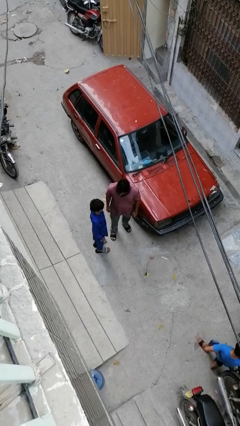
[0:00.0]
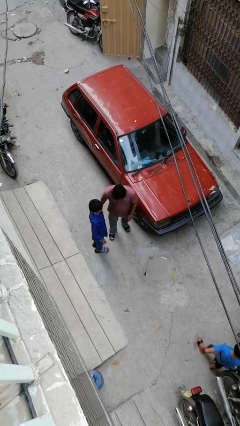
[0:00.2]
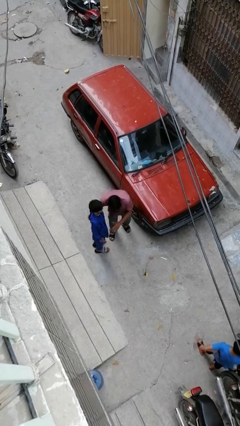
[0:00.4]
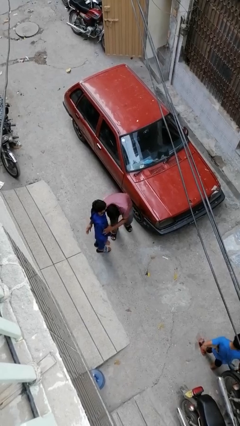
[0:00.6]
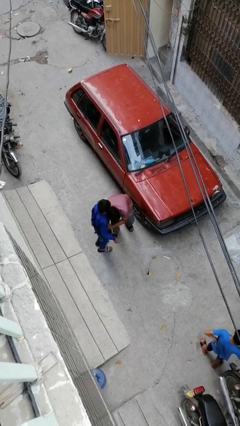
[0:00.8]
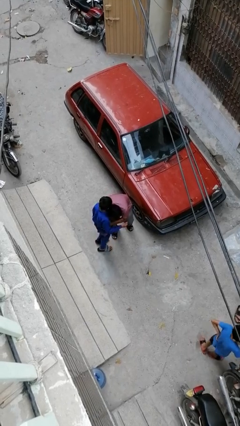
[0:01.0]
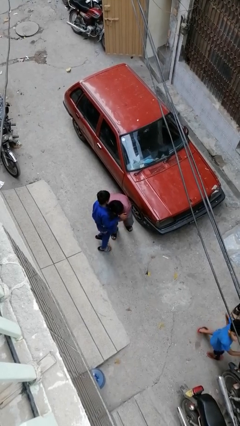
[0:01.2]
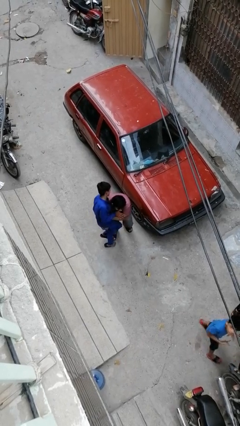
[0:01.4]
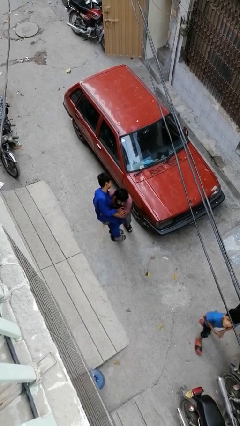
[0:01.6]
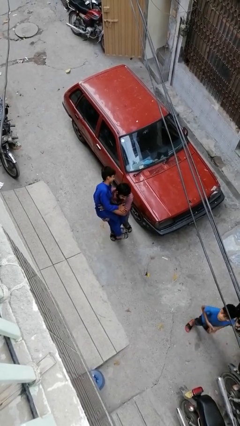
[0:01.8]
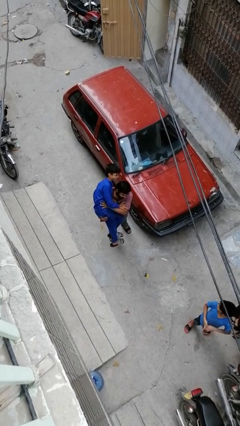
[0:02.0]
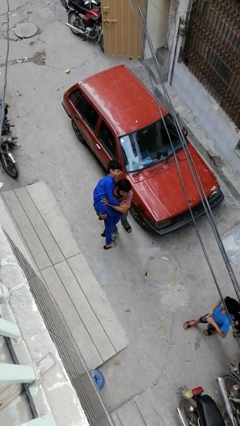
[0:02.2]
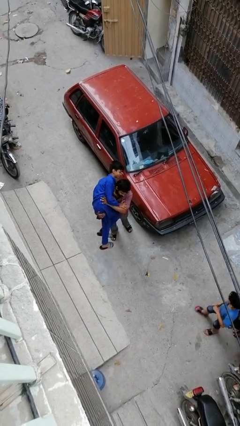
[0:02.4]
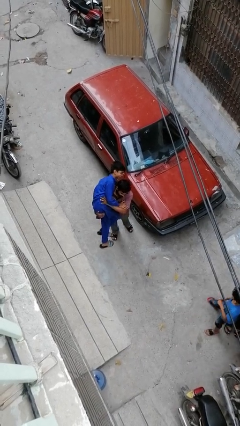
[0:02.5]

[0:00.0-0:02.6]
person picks up person

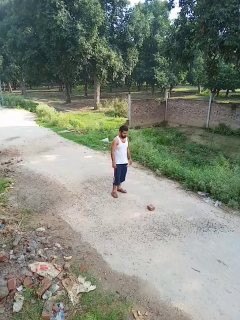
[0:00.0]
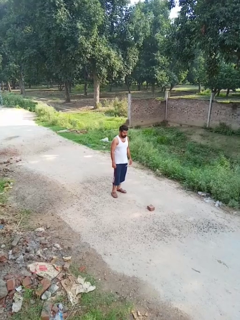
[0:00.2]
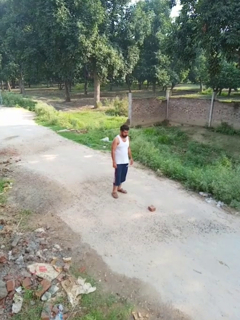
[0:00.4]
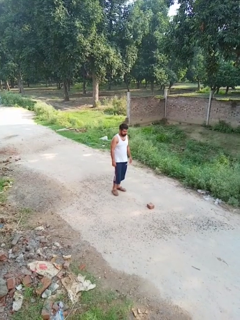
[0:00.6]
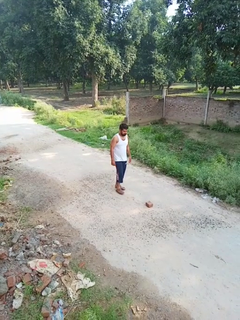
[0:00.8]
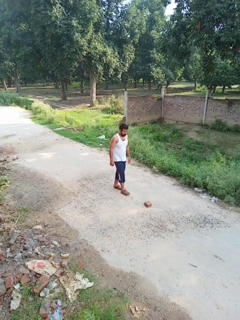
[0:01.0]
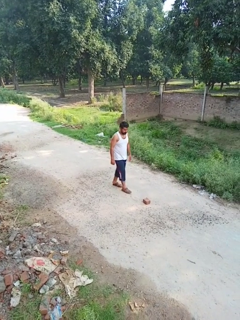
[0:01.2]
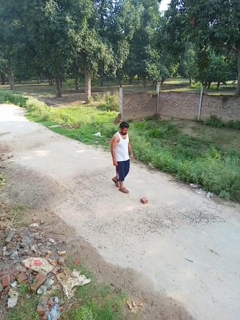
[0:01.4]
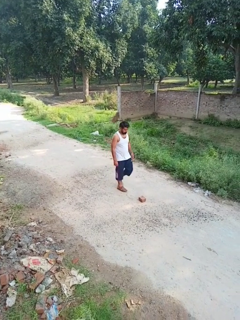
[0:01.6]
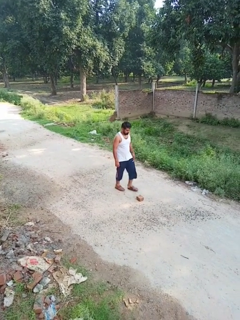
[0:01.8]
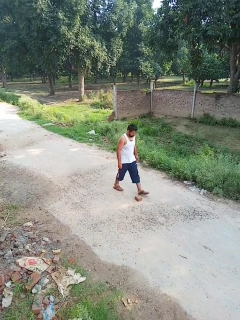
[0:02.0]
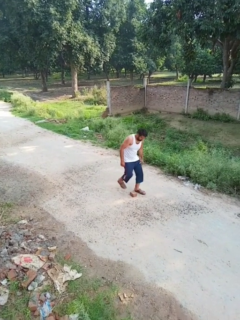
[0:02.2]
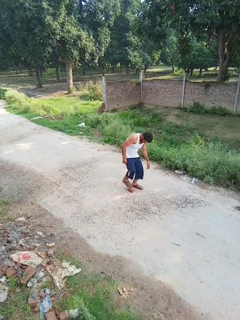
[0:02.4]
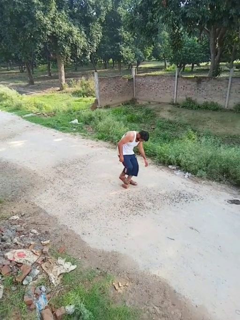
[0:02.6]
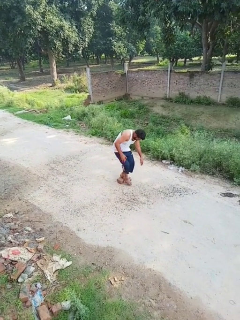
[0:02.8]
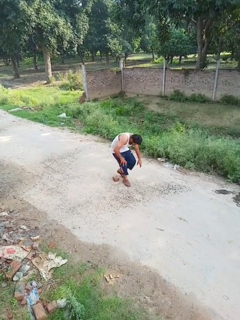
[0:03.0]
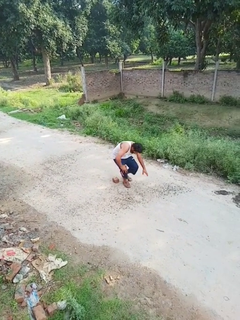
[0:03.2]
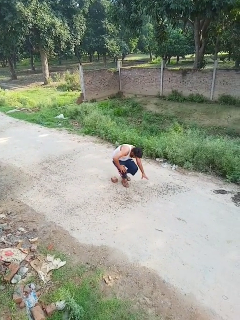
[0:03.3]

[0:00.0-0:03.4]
person trips on object on floor

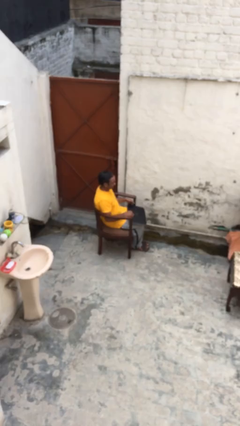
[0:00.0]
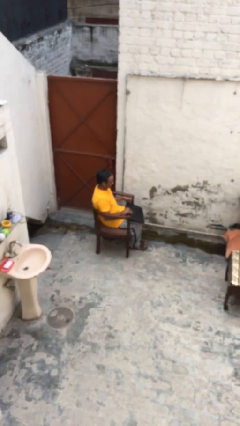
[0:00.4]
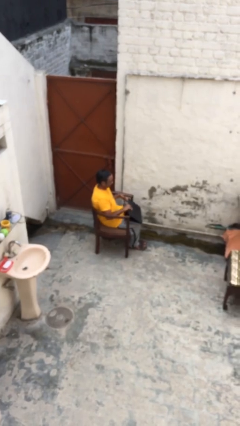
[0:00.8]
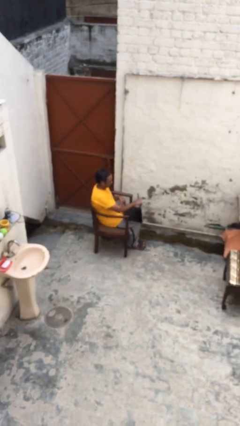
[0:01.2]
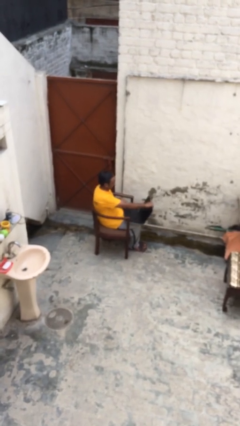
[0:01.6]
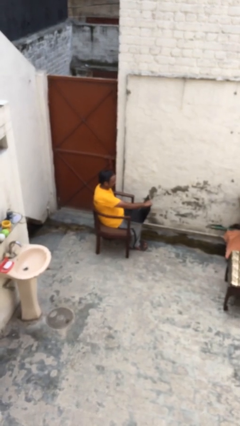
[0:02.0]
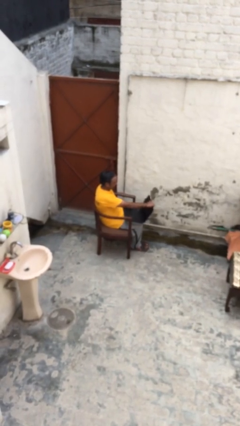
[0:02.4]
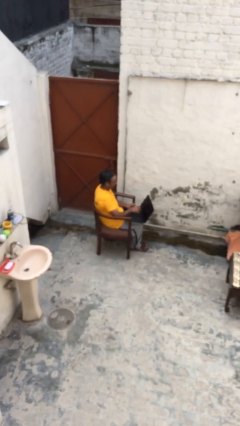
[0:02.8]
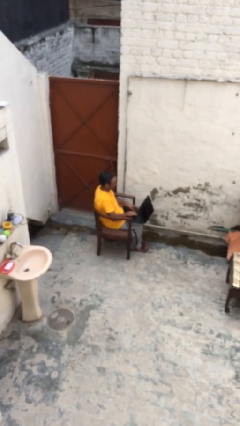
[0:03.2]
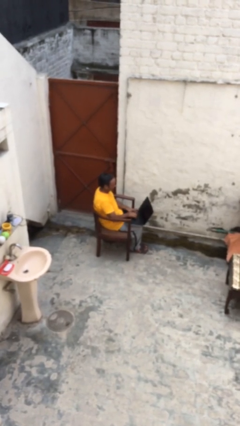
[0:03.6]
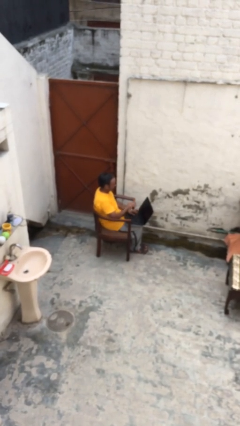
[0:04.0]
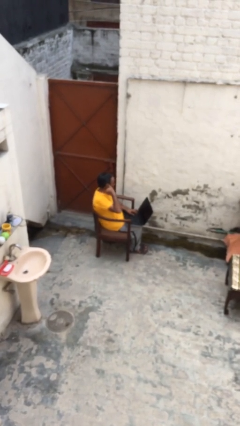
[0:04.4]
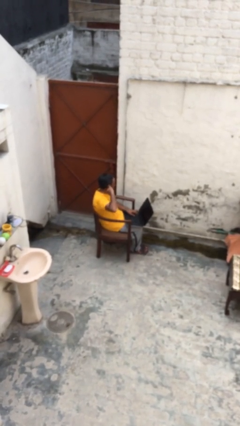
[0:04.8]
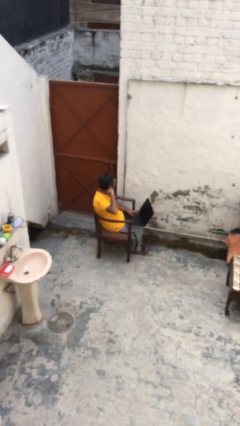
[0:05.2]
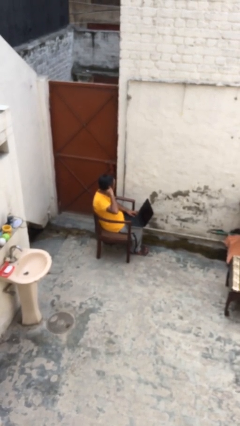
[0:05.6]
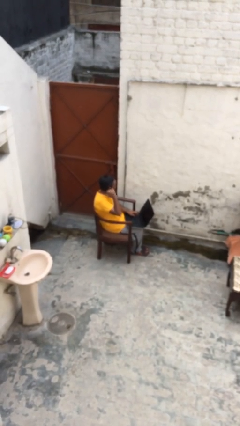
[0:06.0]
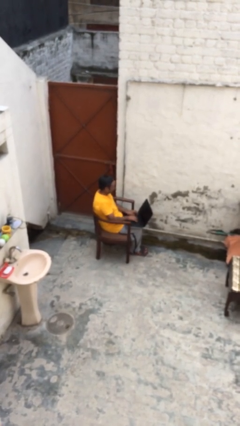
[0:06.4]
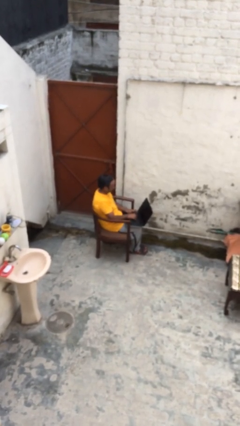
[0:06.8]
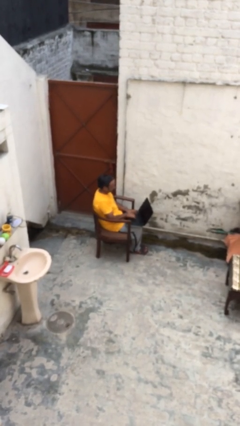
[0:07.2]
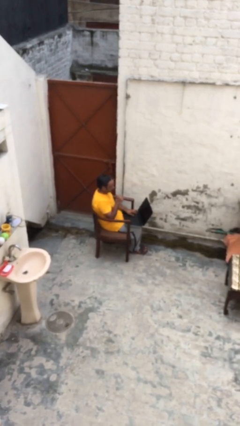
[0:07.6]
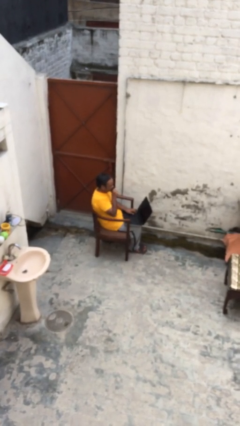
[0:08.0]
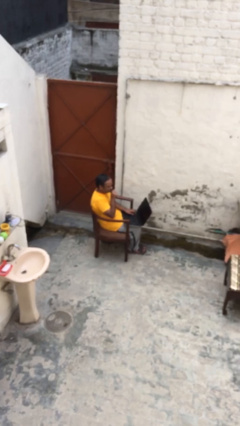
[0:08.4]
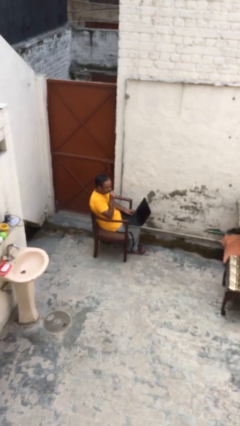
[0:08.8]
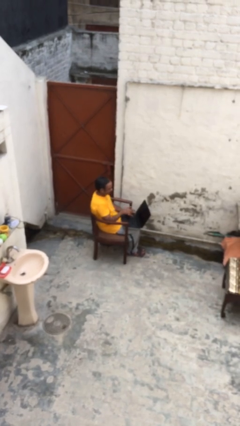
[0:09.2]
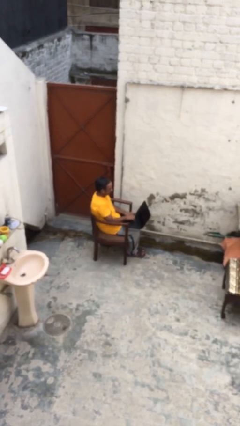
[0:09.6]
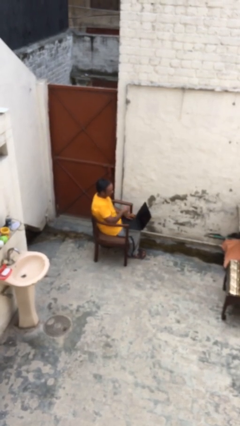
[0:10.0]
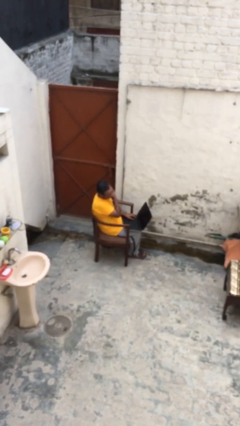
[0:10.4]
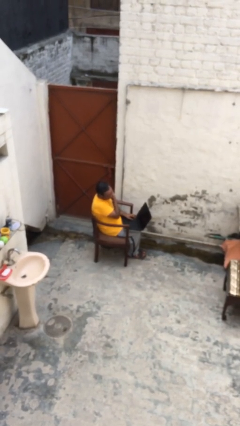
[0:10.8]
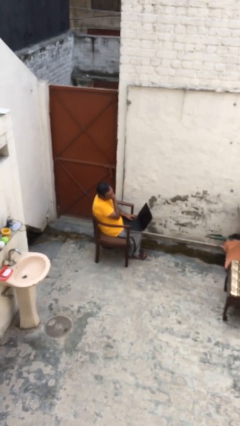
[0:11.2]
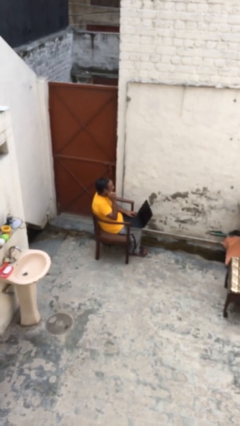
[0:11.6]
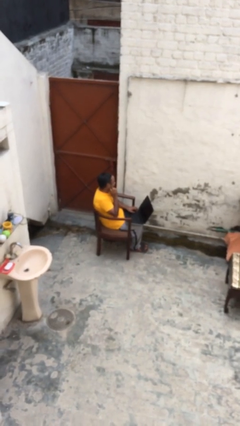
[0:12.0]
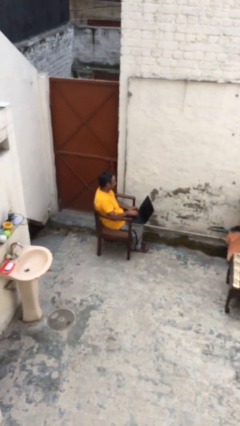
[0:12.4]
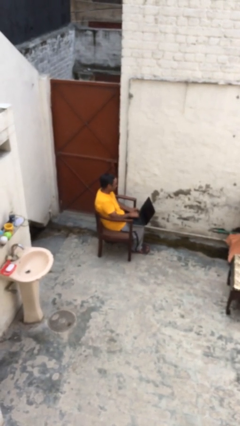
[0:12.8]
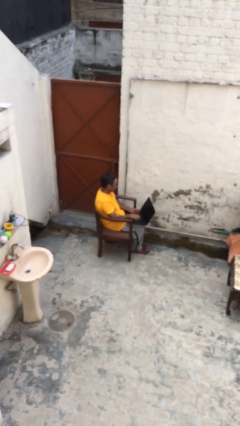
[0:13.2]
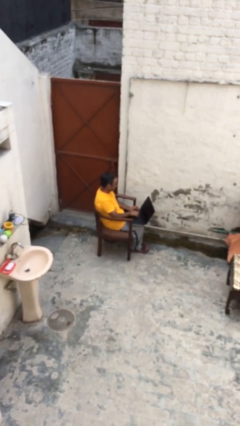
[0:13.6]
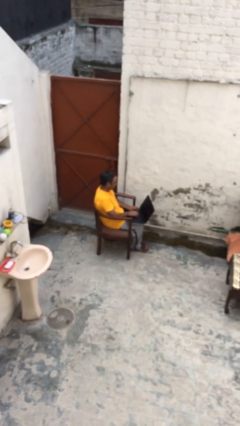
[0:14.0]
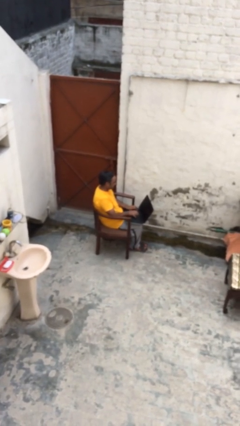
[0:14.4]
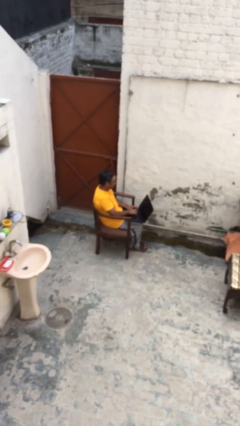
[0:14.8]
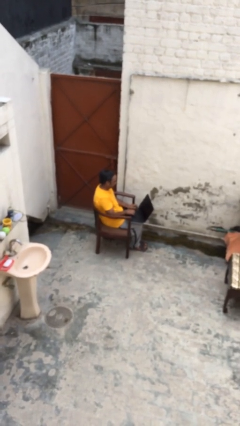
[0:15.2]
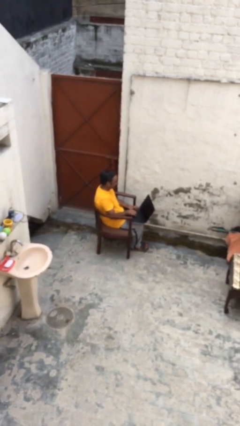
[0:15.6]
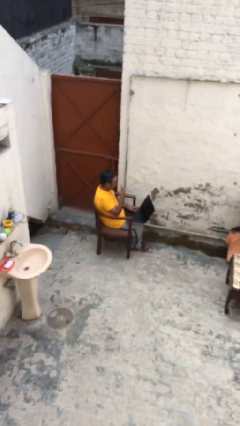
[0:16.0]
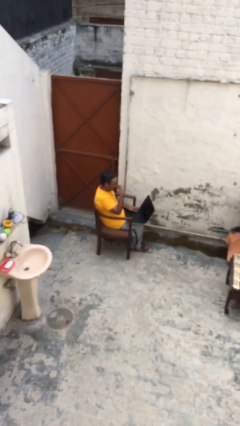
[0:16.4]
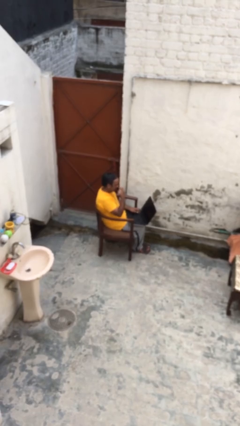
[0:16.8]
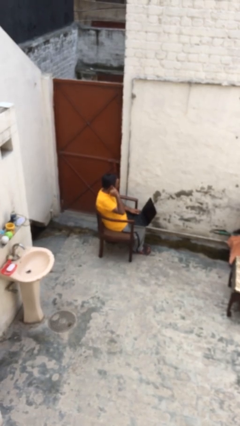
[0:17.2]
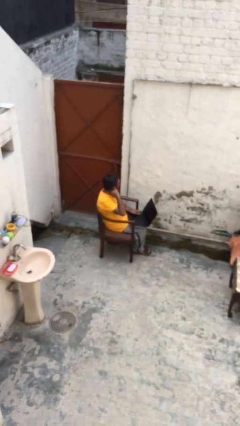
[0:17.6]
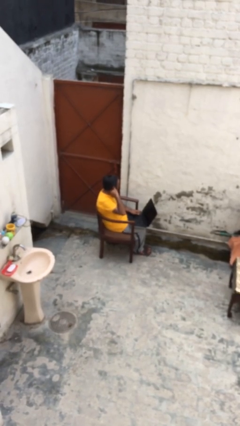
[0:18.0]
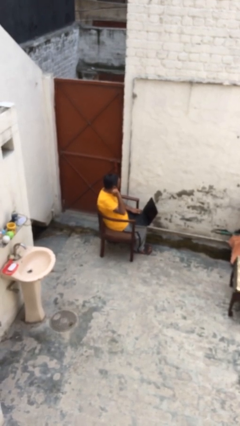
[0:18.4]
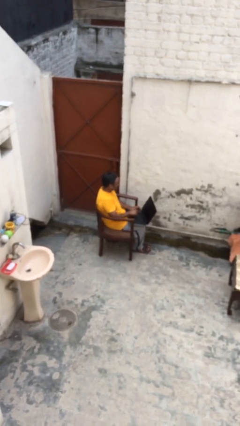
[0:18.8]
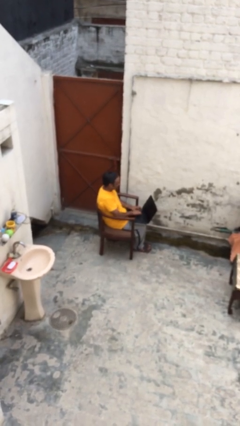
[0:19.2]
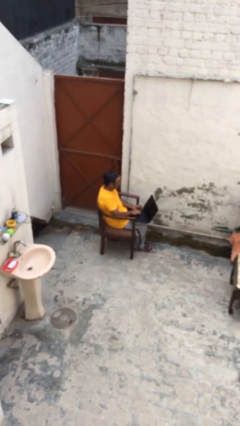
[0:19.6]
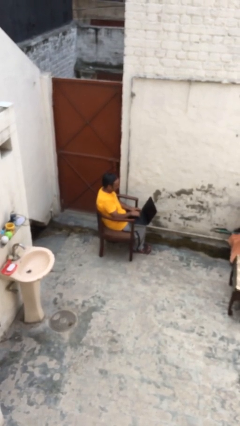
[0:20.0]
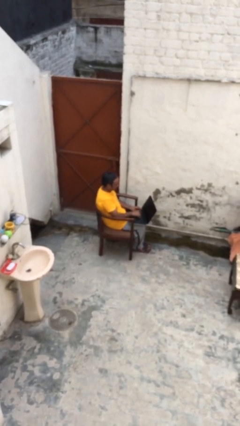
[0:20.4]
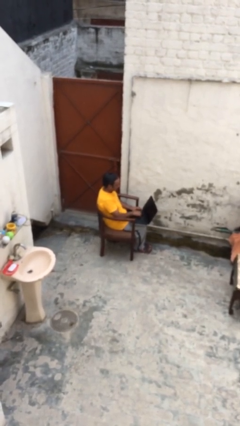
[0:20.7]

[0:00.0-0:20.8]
person interacts with laptop

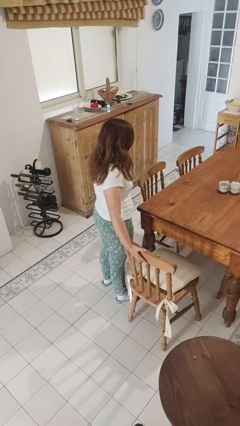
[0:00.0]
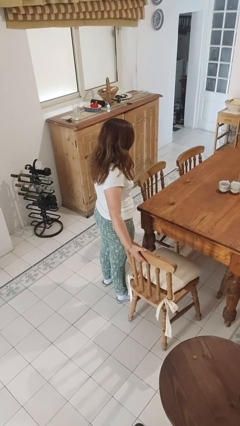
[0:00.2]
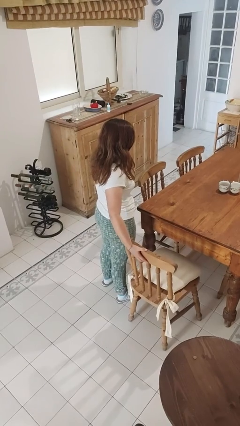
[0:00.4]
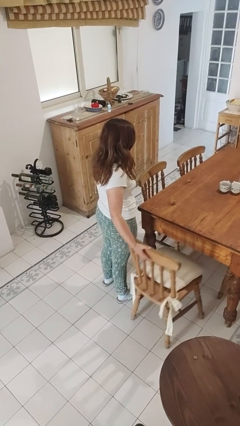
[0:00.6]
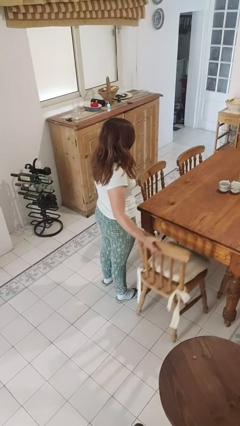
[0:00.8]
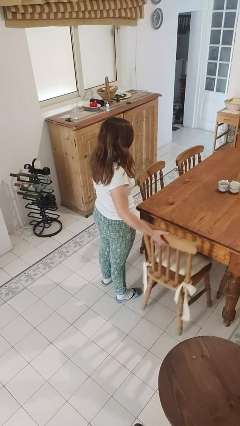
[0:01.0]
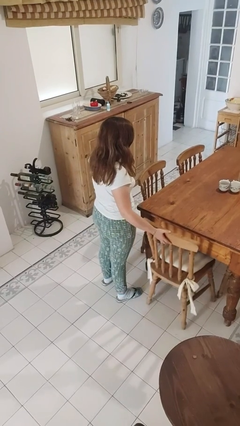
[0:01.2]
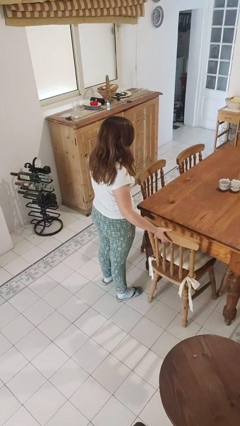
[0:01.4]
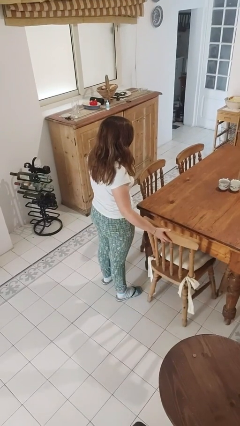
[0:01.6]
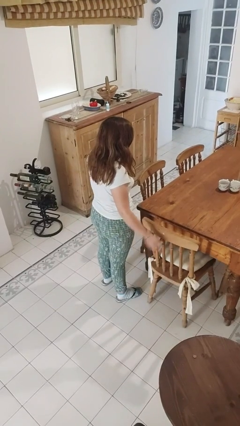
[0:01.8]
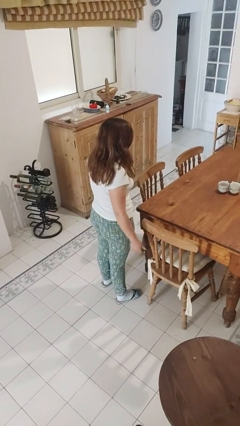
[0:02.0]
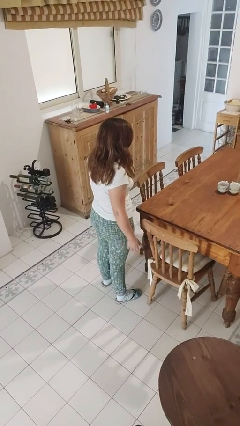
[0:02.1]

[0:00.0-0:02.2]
person pushes in chair
